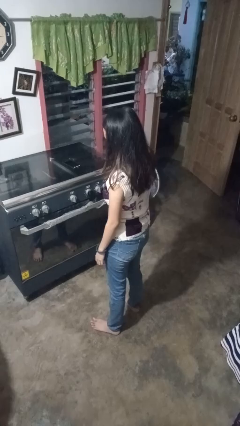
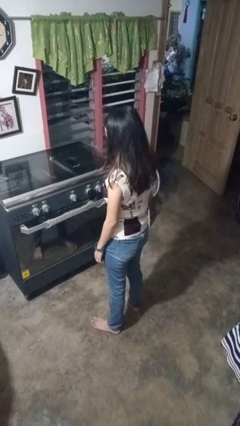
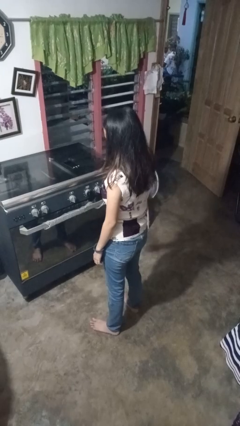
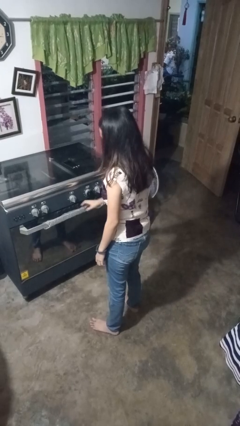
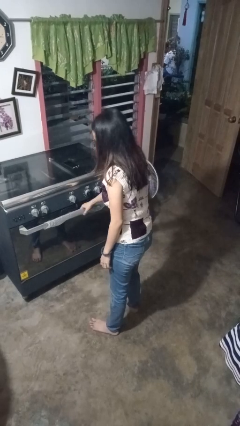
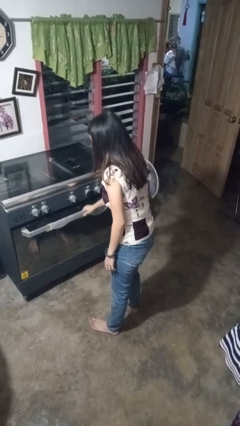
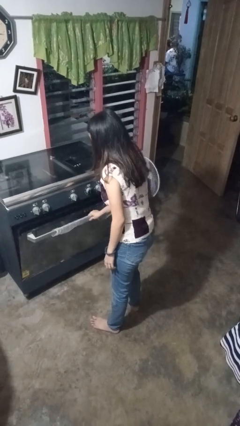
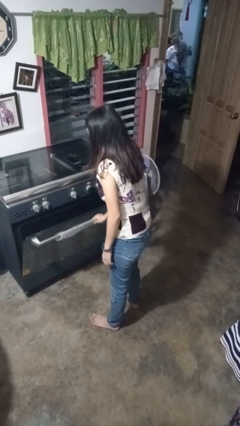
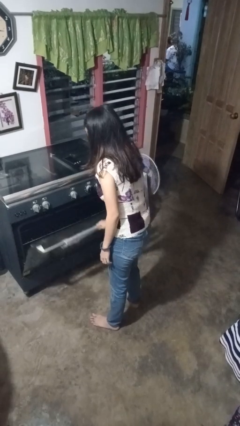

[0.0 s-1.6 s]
person opens oven door

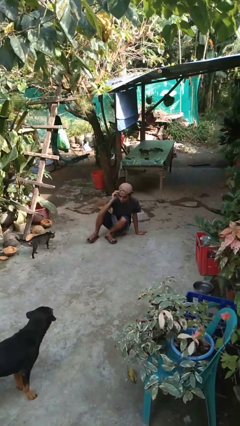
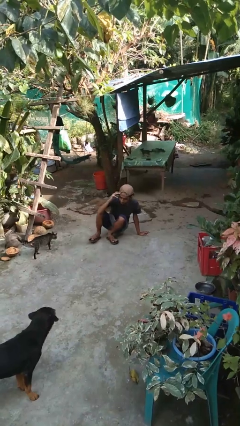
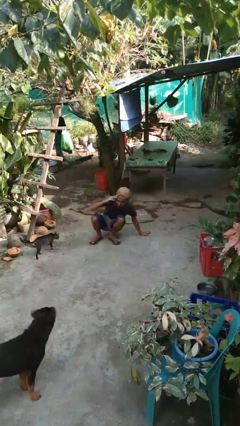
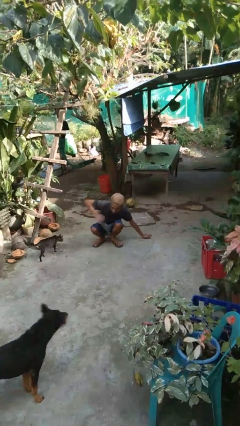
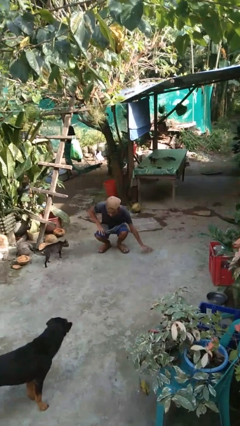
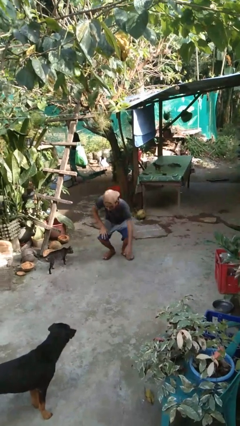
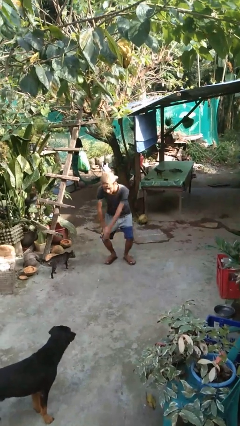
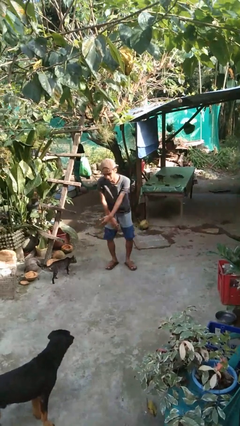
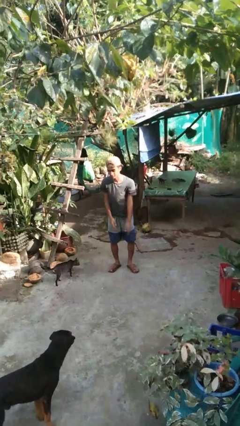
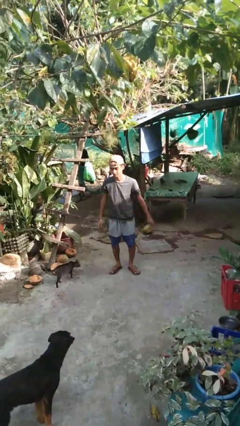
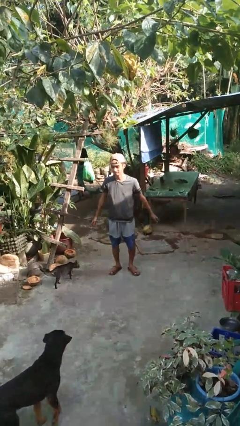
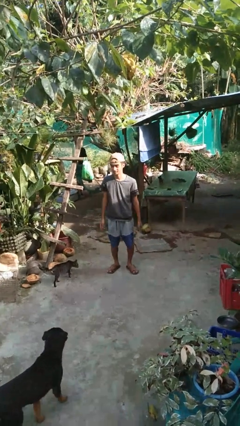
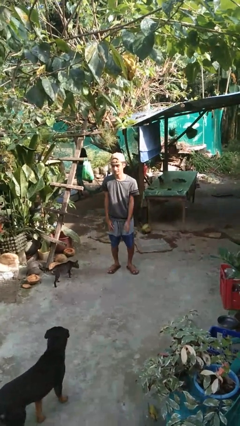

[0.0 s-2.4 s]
person stands up from floor

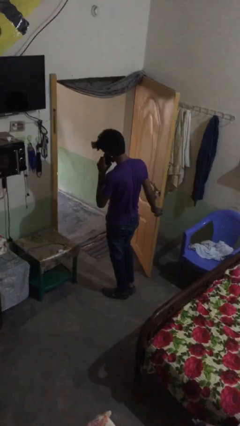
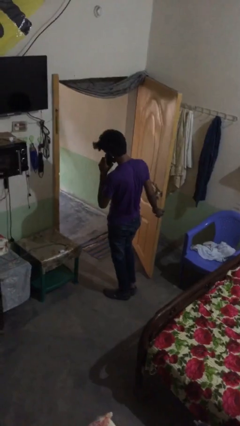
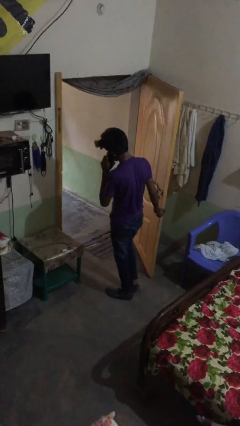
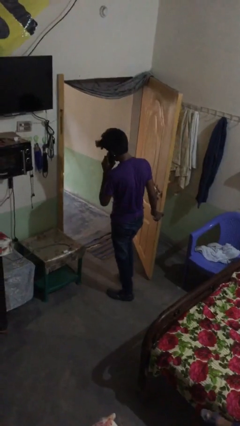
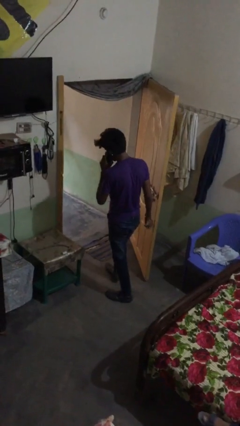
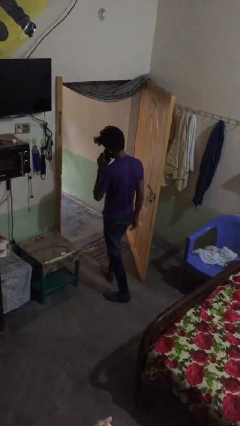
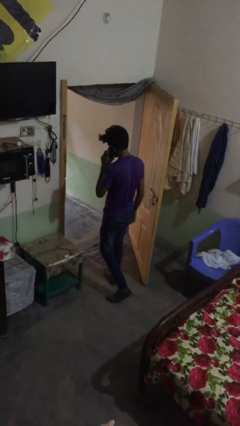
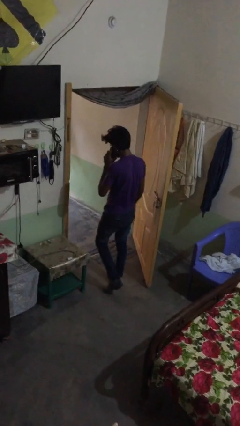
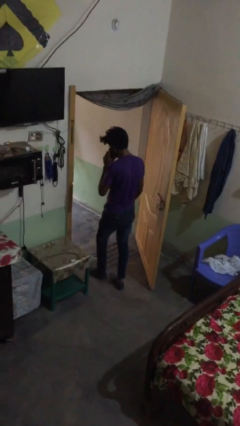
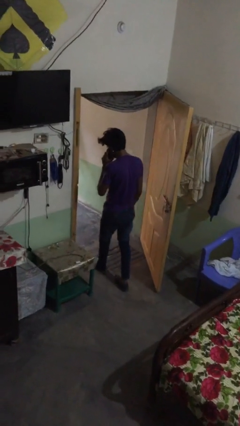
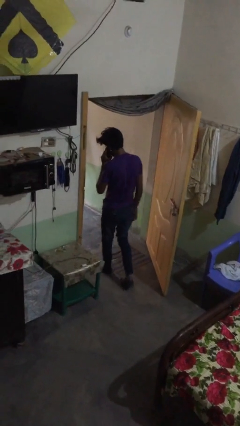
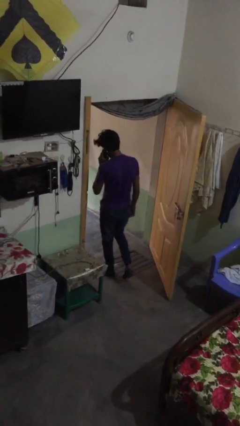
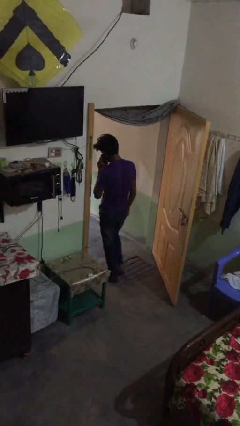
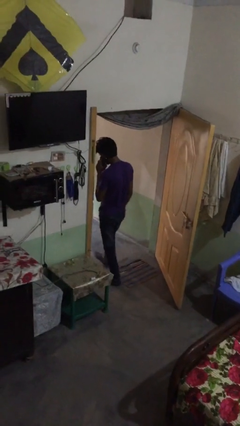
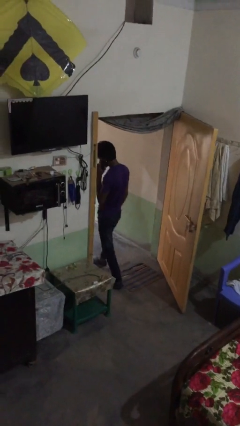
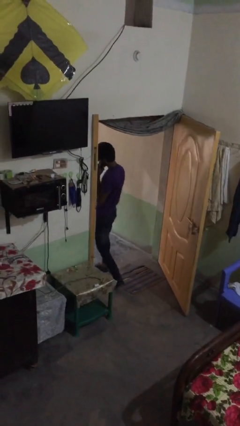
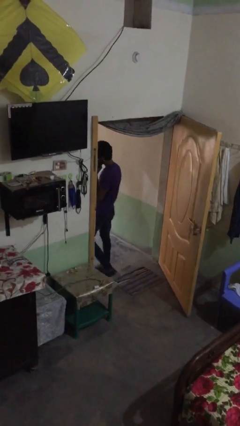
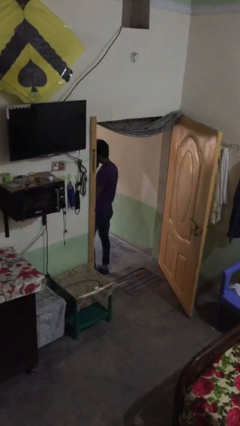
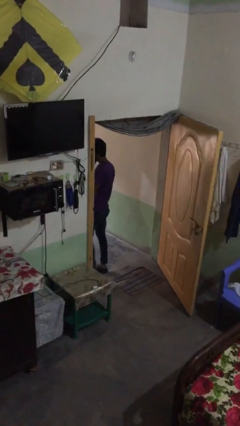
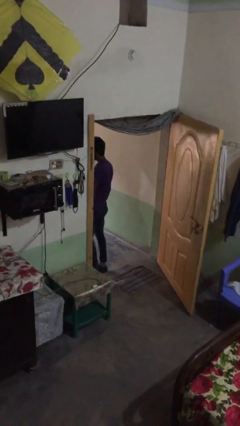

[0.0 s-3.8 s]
person exits scene through structure

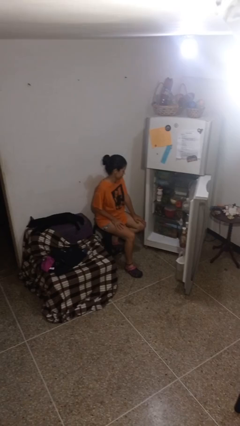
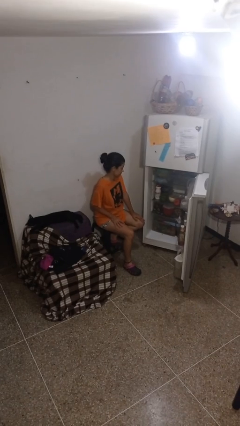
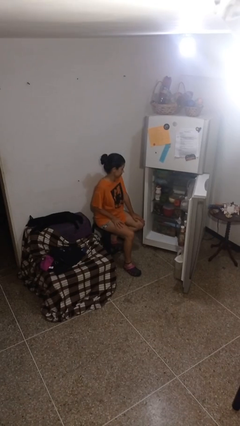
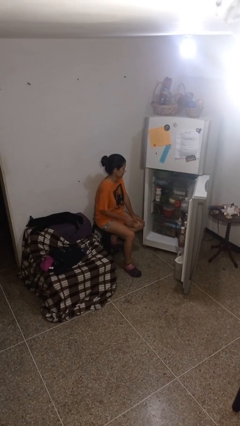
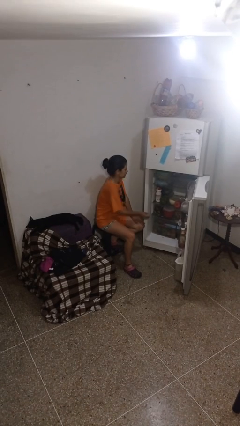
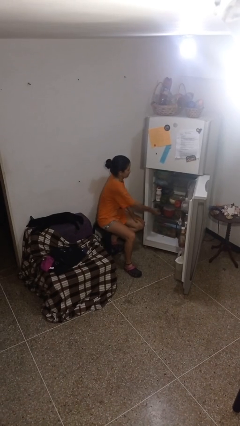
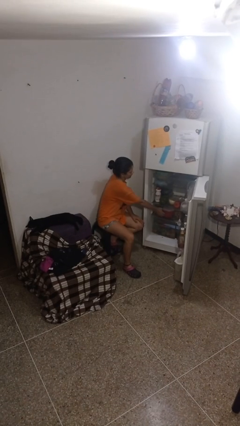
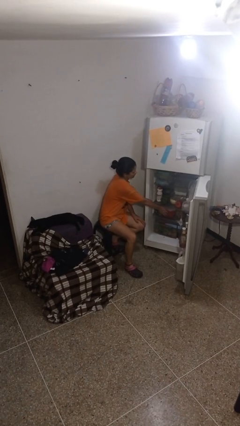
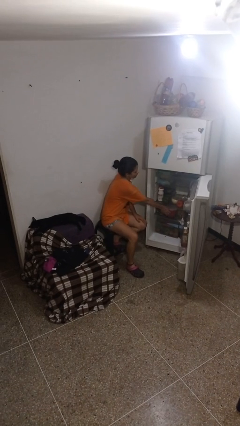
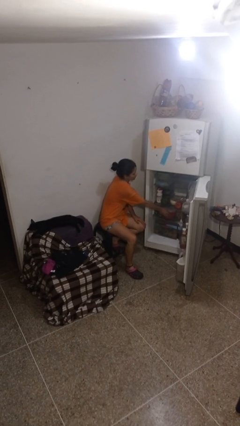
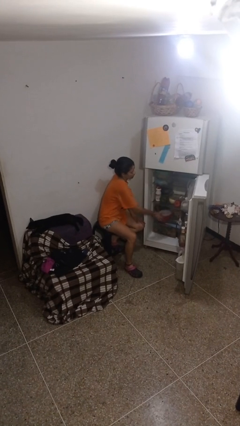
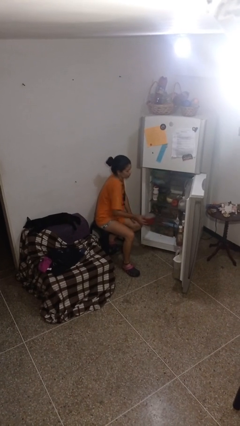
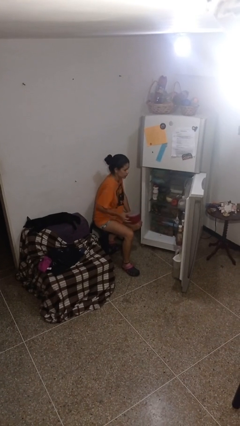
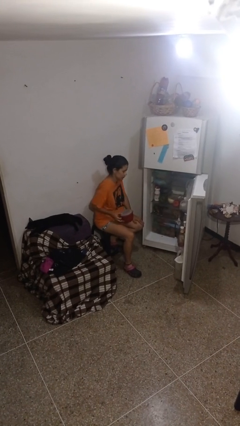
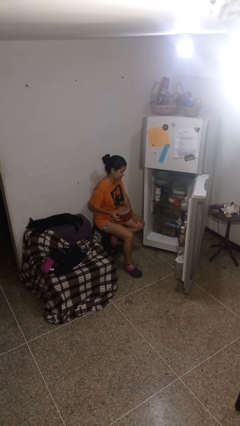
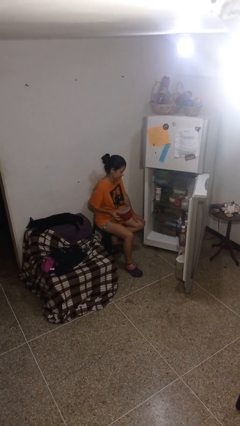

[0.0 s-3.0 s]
person takes object from refrigerator

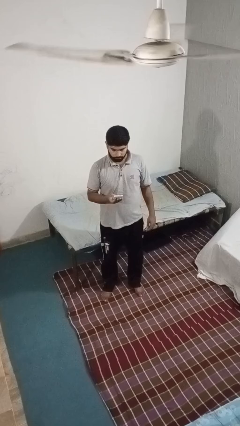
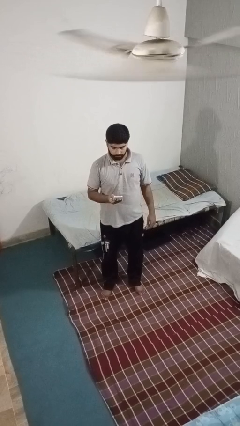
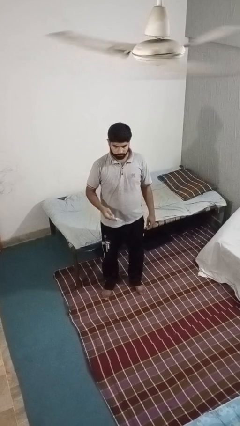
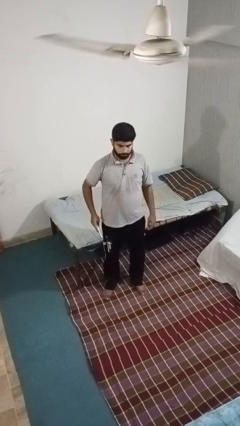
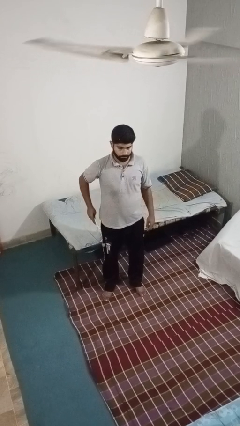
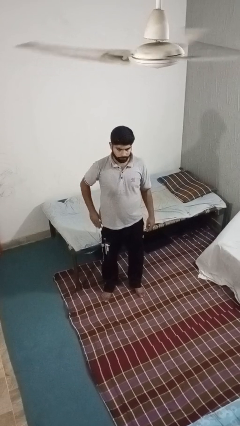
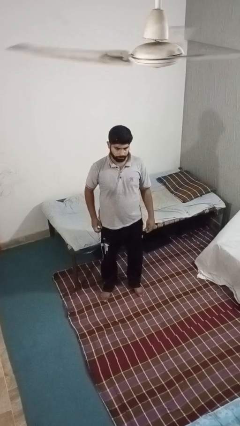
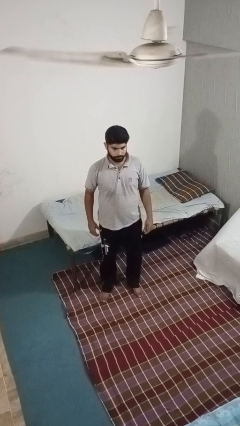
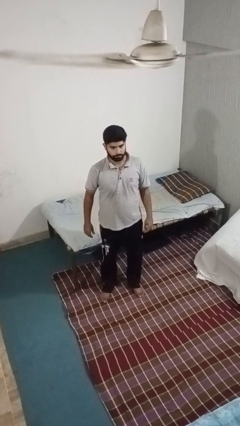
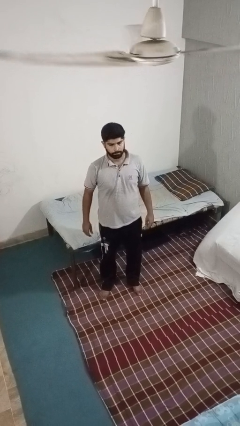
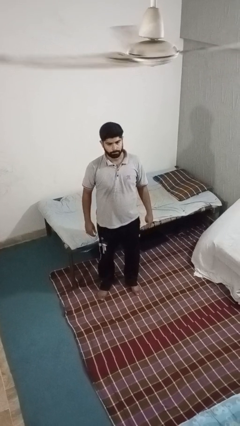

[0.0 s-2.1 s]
person puts phone into pocket

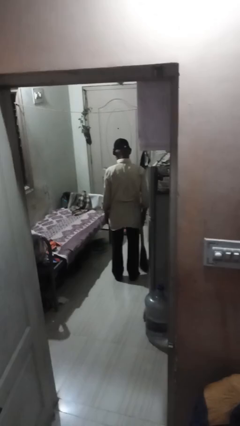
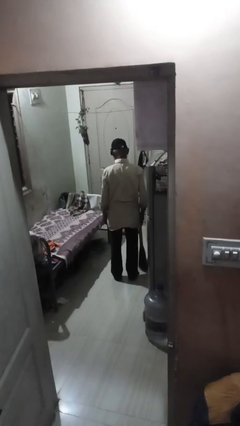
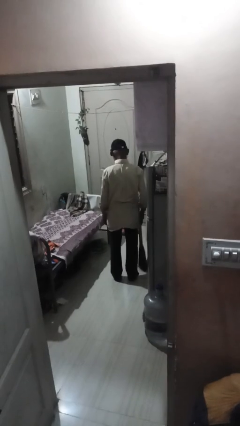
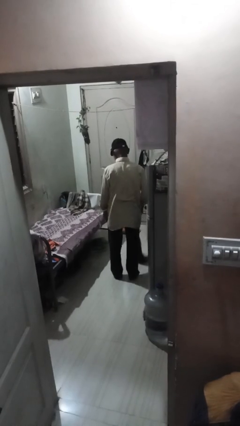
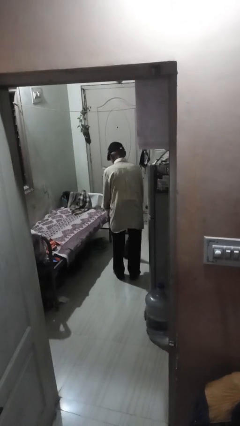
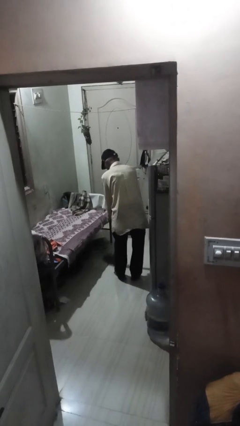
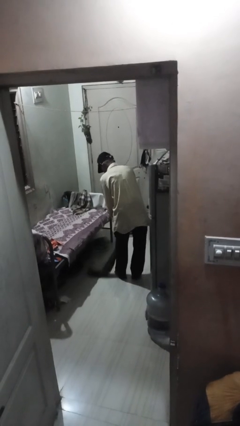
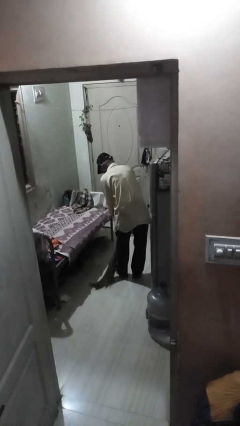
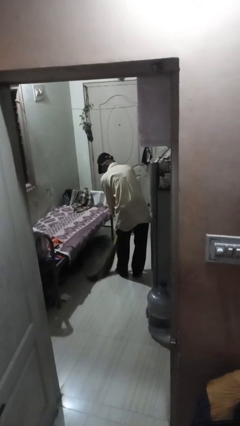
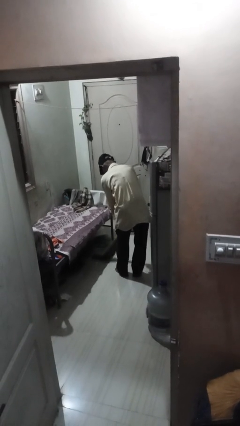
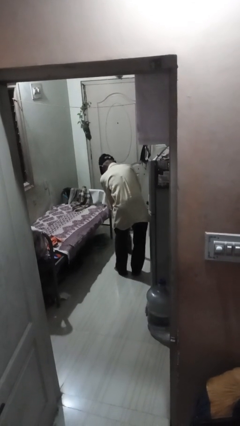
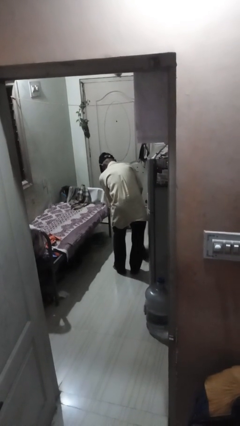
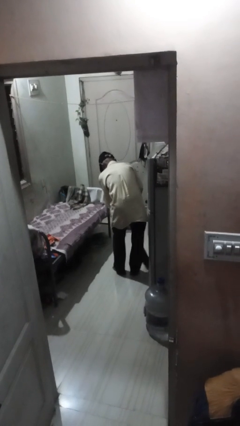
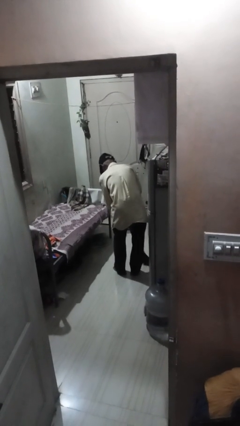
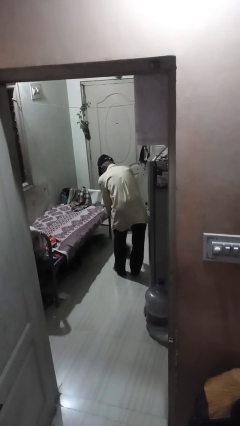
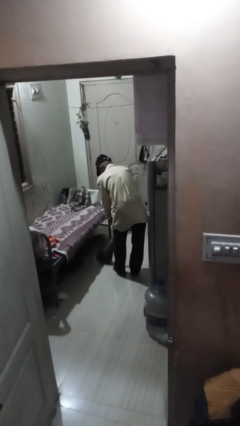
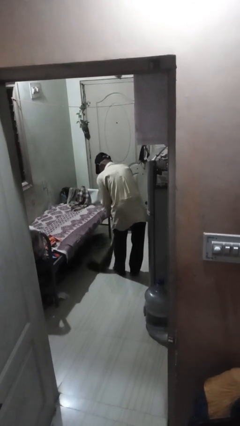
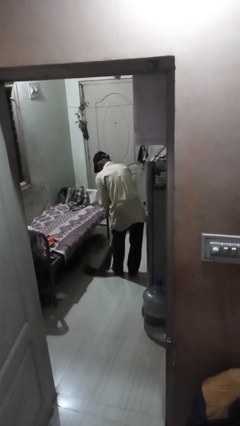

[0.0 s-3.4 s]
person sweeps floor

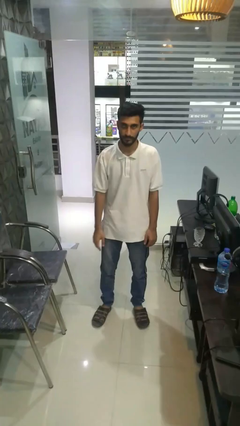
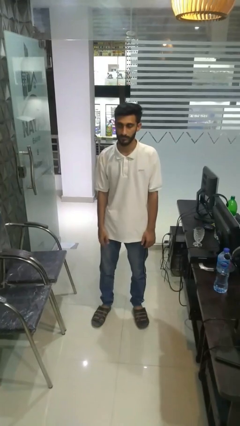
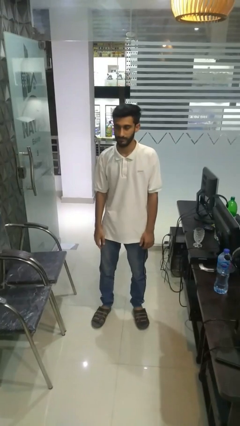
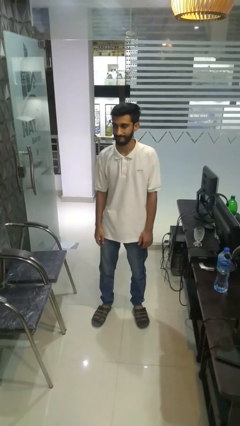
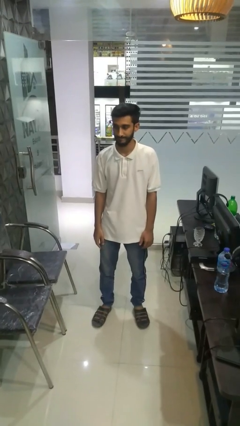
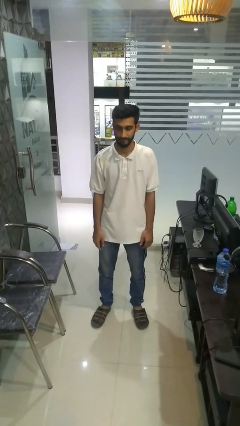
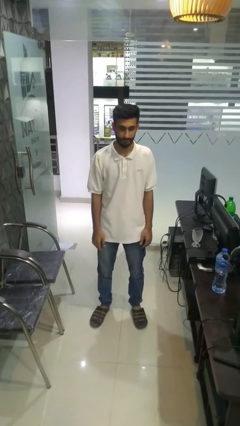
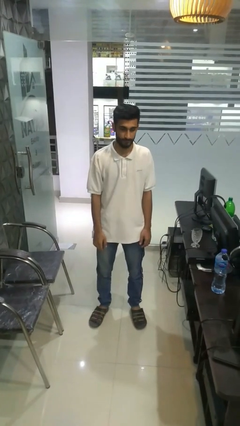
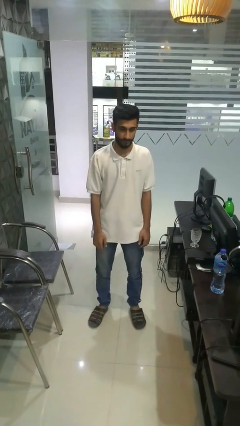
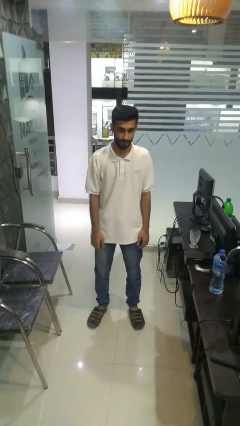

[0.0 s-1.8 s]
person gestures lower hand
